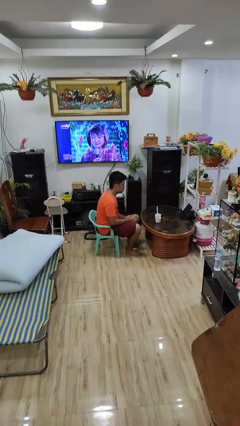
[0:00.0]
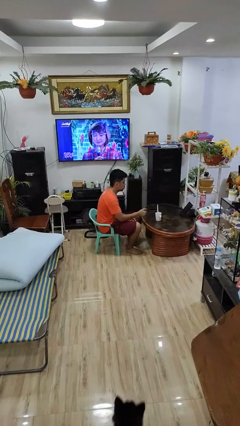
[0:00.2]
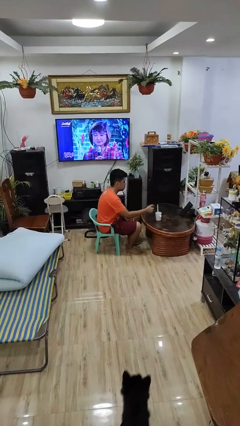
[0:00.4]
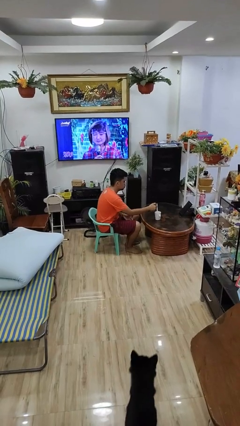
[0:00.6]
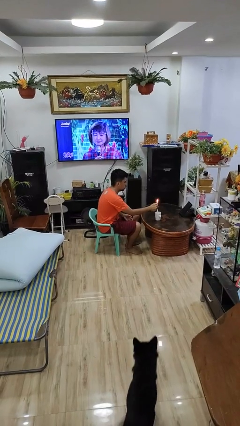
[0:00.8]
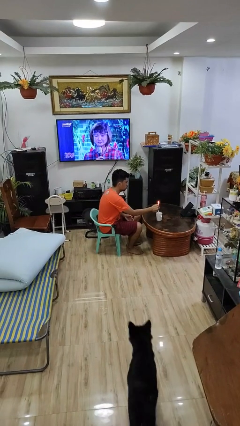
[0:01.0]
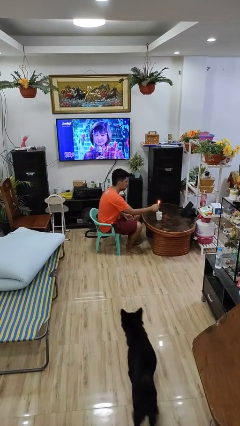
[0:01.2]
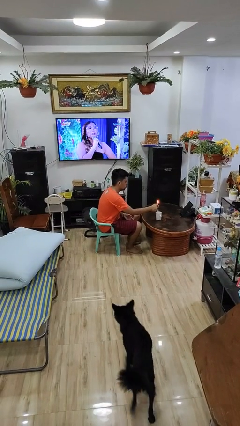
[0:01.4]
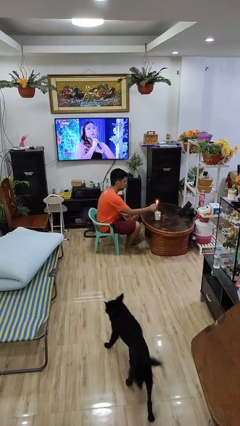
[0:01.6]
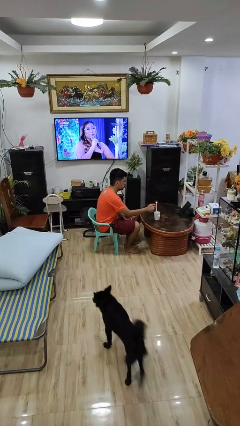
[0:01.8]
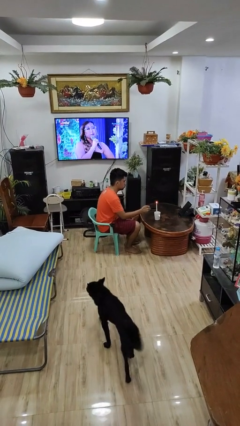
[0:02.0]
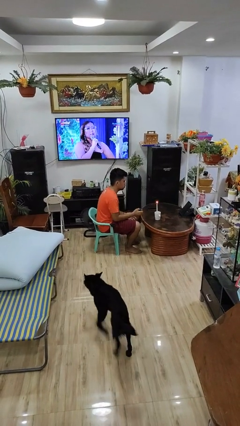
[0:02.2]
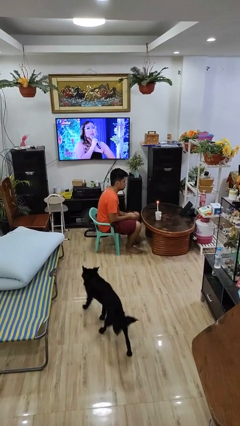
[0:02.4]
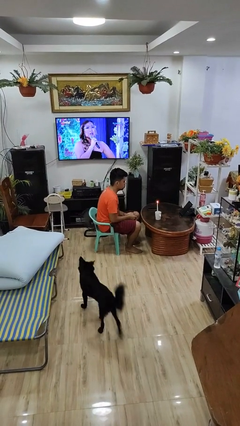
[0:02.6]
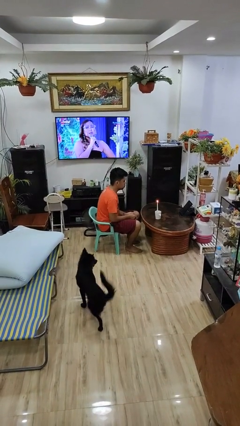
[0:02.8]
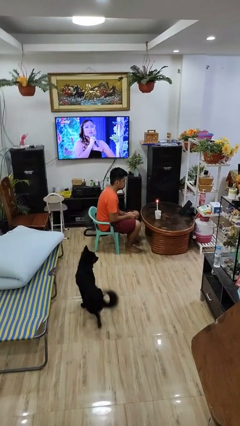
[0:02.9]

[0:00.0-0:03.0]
person lights candle

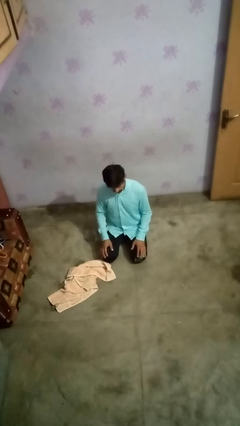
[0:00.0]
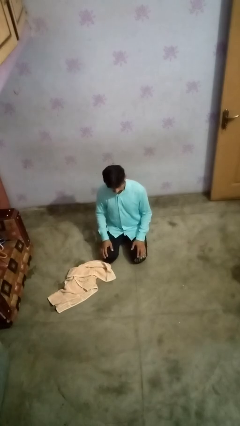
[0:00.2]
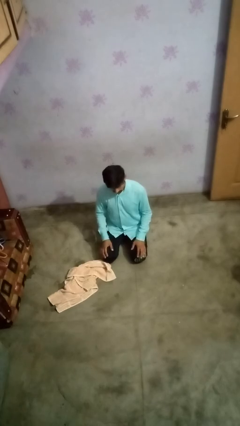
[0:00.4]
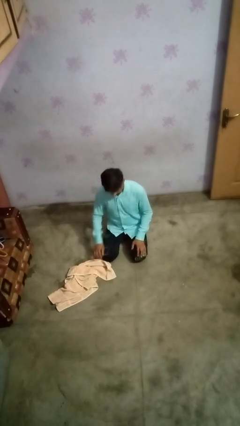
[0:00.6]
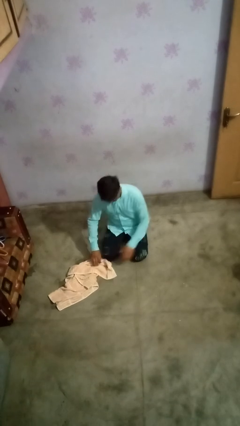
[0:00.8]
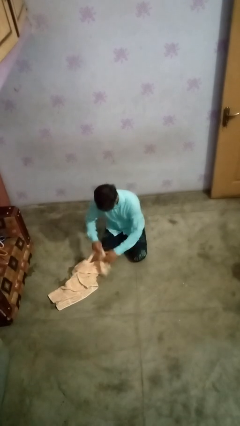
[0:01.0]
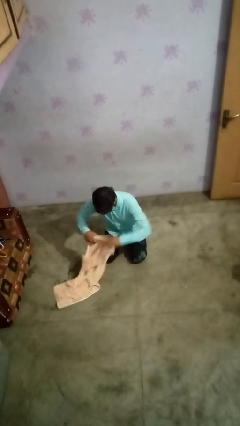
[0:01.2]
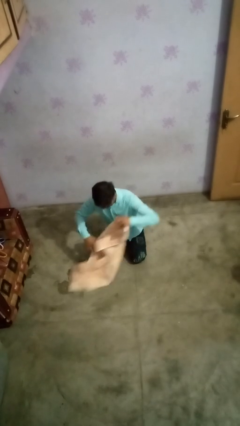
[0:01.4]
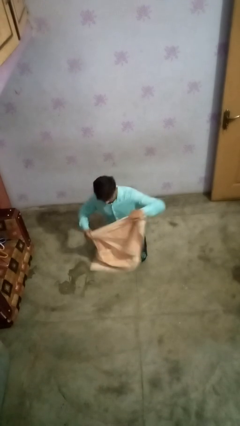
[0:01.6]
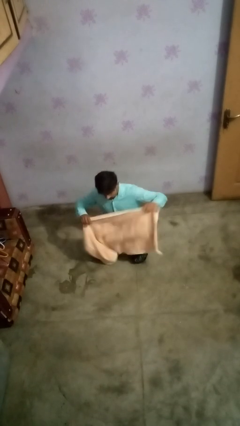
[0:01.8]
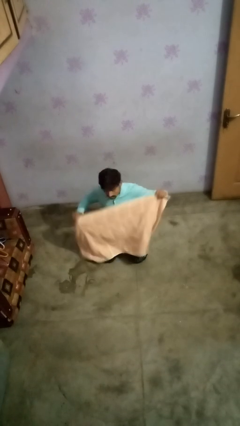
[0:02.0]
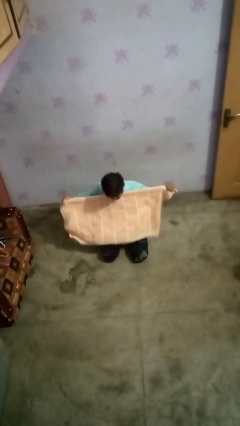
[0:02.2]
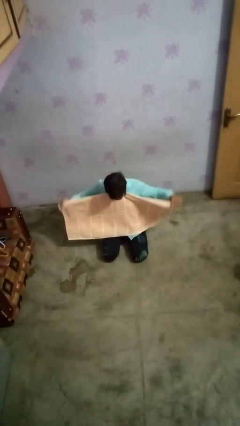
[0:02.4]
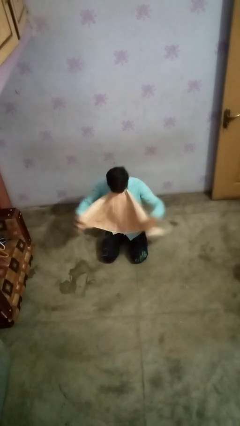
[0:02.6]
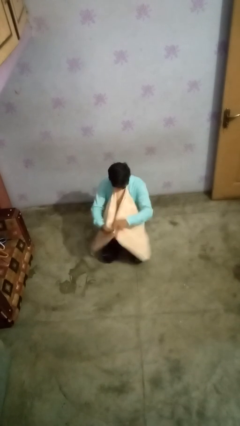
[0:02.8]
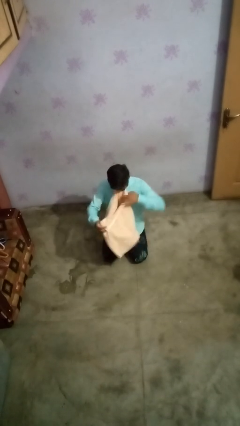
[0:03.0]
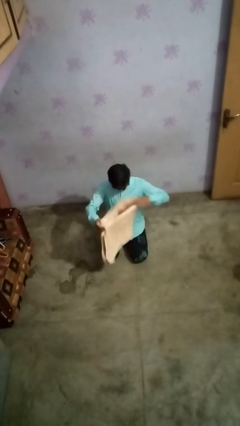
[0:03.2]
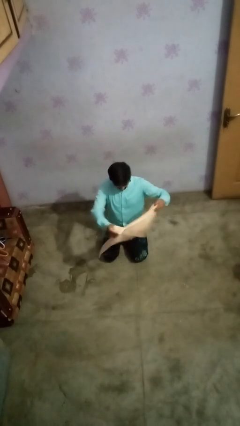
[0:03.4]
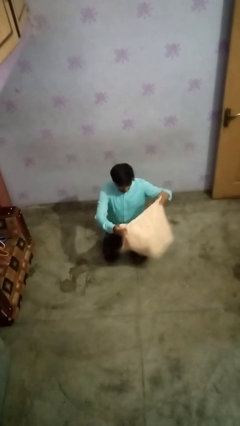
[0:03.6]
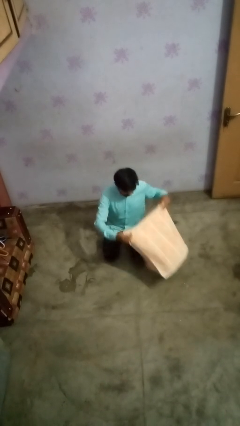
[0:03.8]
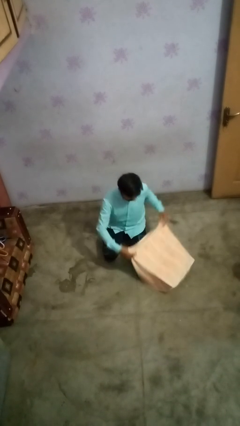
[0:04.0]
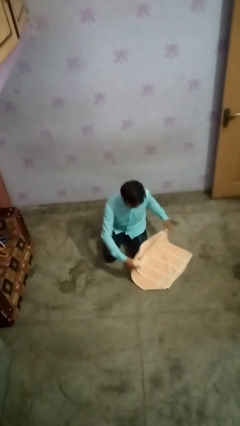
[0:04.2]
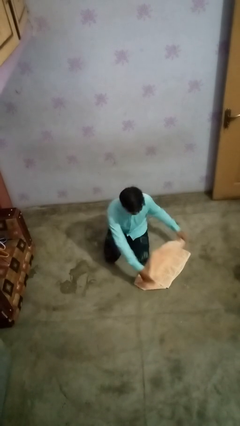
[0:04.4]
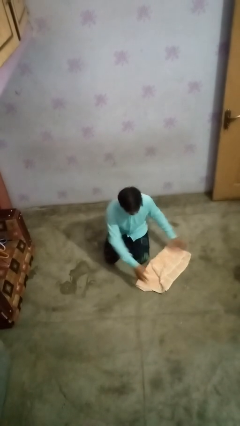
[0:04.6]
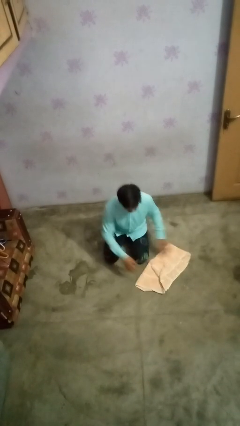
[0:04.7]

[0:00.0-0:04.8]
person folds towel

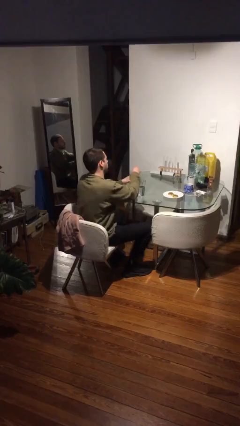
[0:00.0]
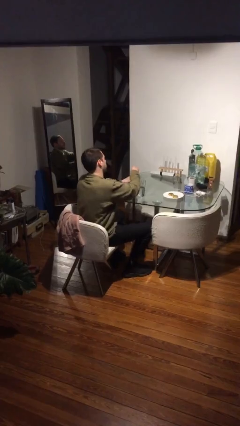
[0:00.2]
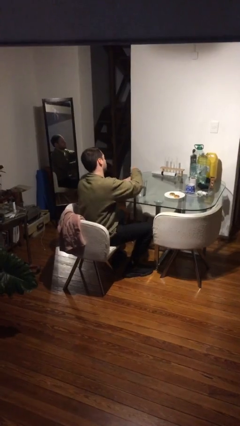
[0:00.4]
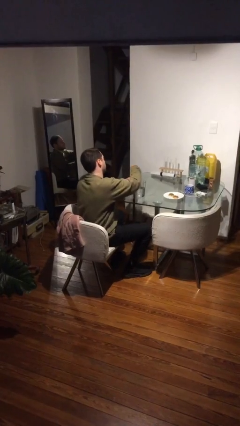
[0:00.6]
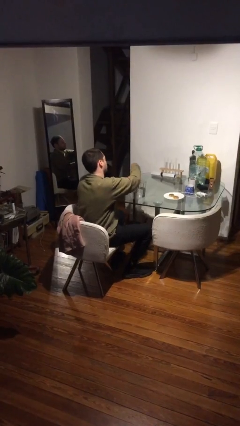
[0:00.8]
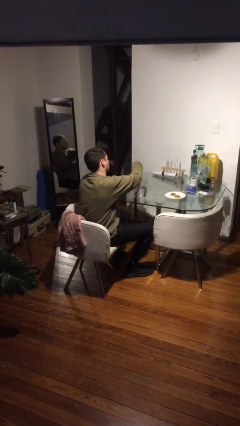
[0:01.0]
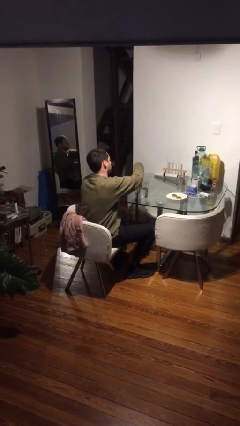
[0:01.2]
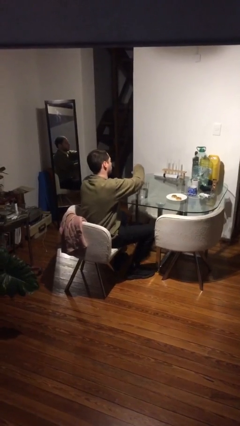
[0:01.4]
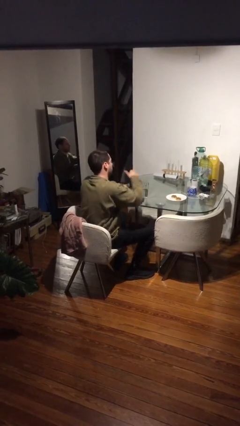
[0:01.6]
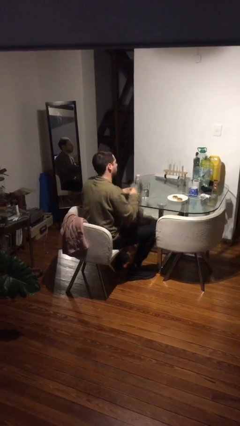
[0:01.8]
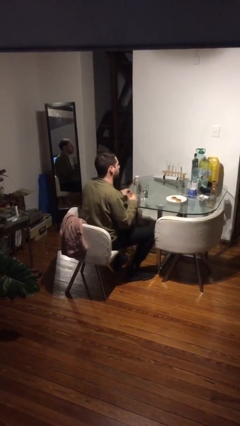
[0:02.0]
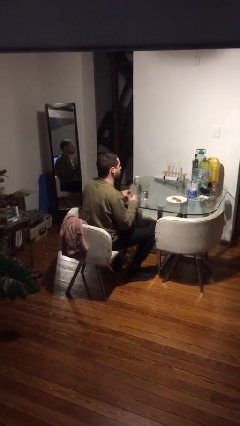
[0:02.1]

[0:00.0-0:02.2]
person screws lid to bottle

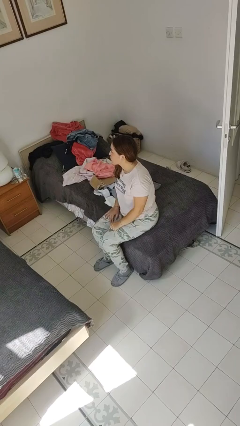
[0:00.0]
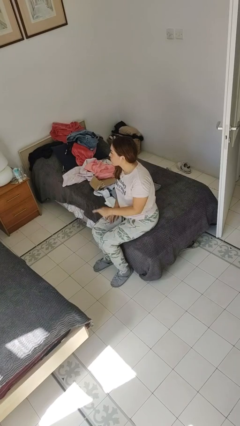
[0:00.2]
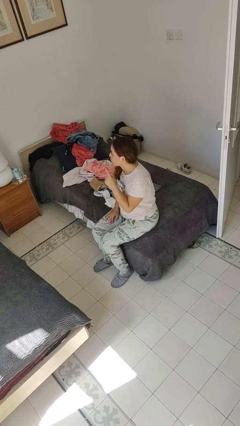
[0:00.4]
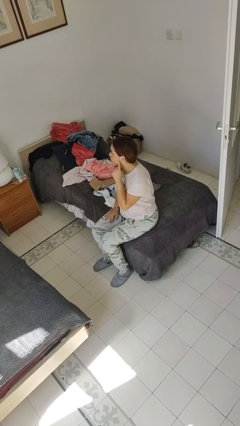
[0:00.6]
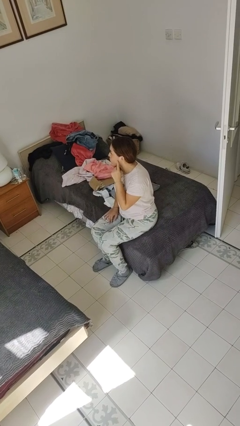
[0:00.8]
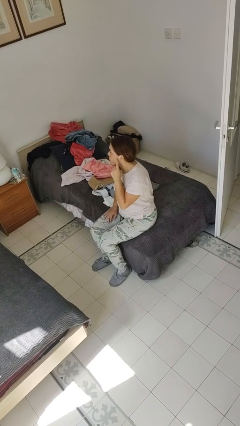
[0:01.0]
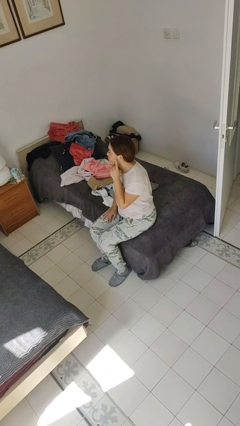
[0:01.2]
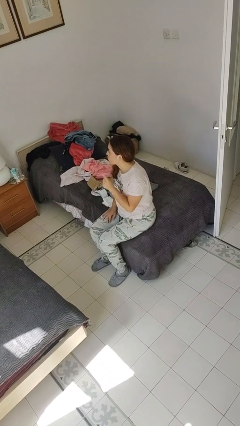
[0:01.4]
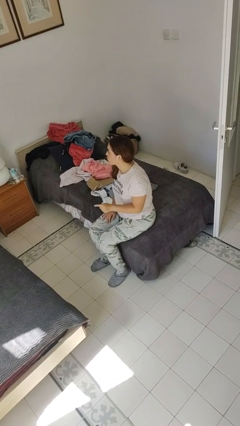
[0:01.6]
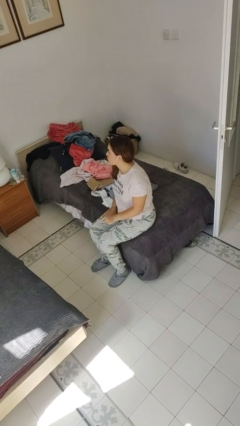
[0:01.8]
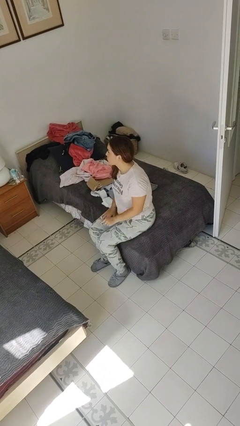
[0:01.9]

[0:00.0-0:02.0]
person gestures listen closely

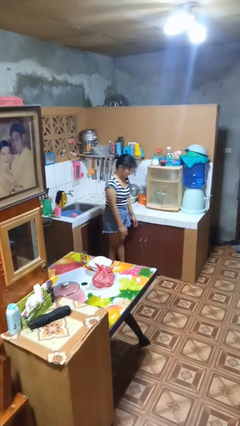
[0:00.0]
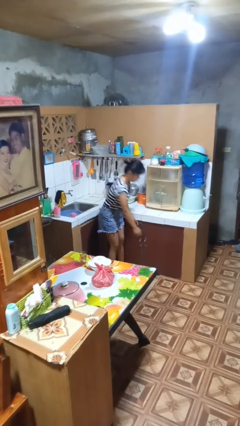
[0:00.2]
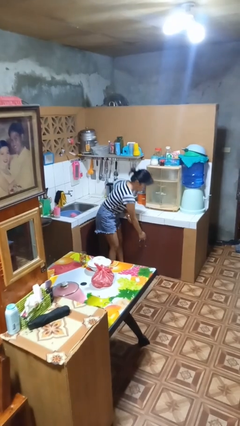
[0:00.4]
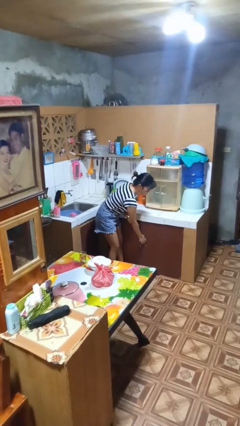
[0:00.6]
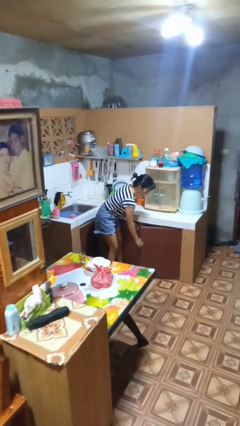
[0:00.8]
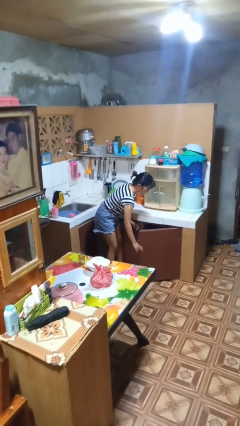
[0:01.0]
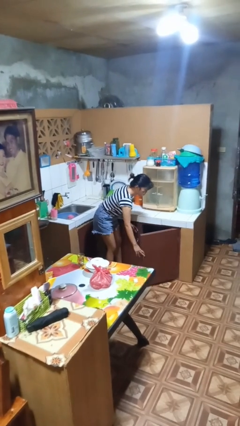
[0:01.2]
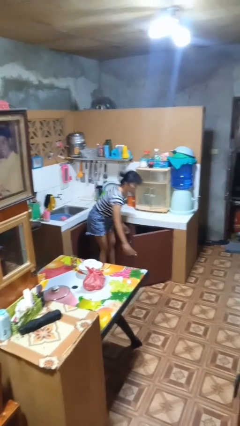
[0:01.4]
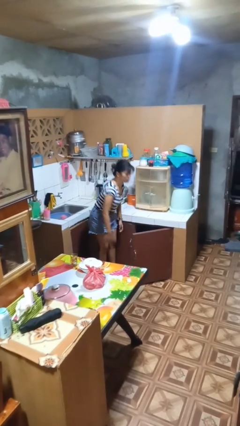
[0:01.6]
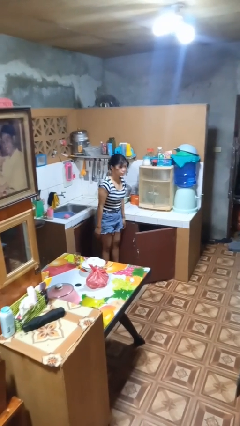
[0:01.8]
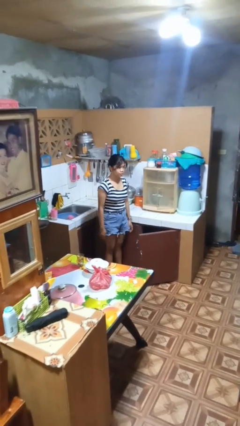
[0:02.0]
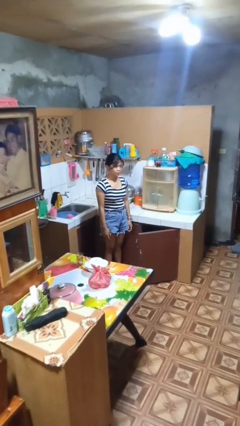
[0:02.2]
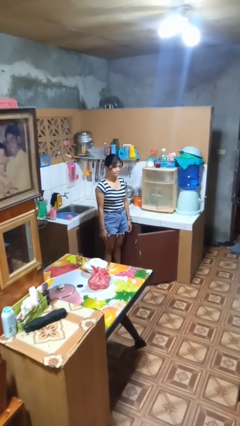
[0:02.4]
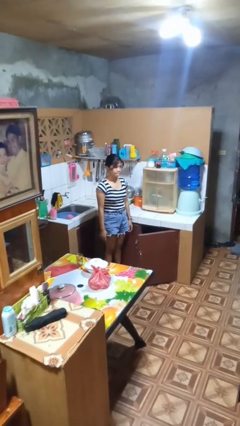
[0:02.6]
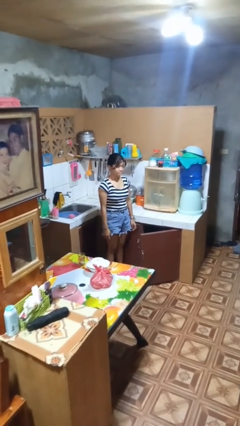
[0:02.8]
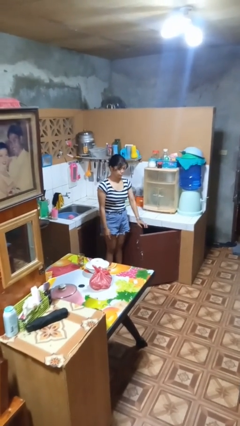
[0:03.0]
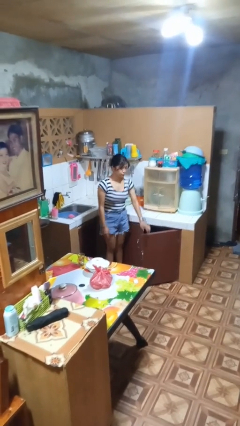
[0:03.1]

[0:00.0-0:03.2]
person opens cabinet

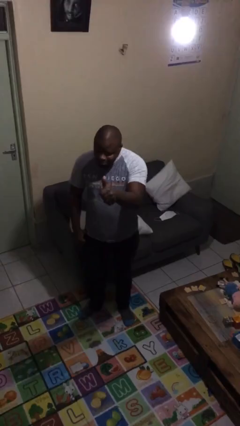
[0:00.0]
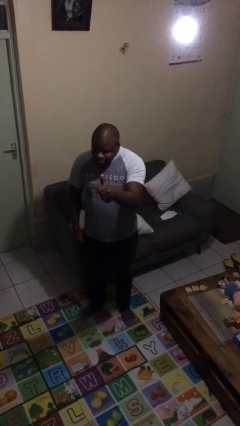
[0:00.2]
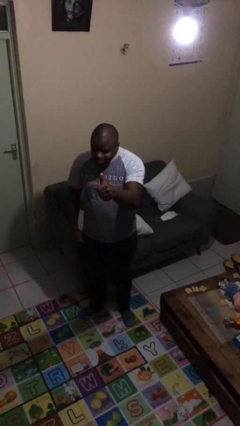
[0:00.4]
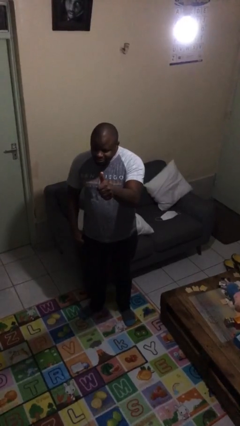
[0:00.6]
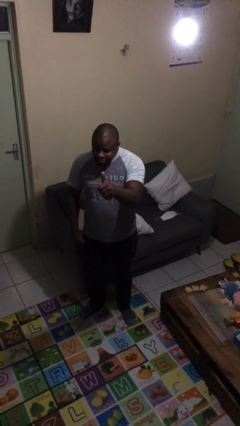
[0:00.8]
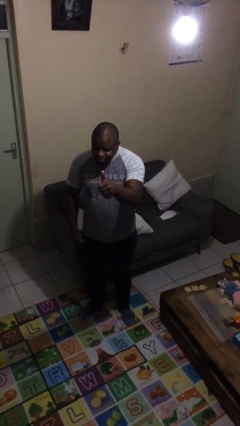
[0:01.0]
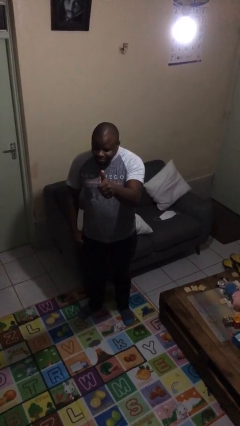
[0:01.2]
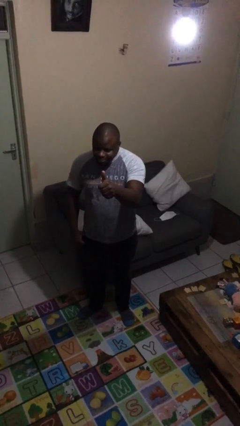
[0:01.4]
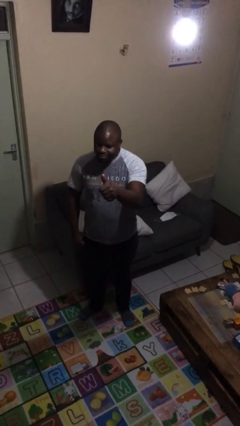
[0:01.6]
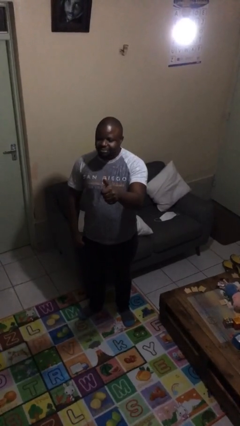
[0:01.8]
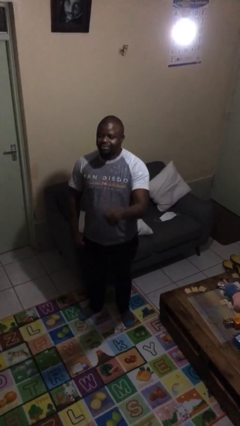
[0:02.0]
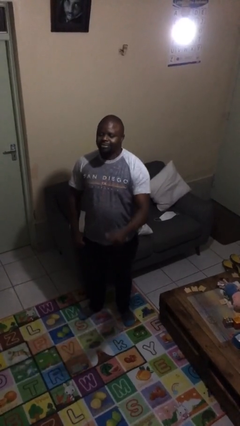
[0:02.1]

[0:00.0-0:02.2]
person gestures thumbs up
